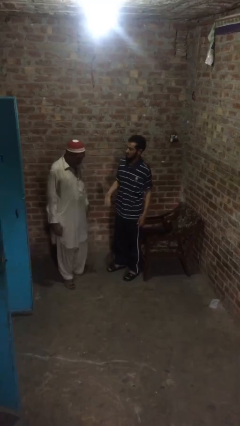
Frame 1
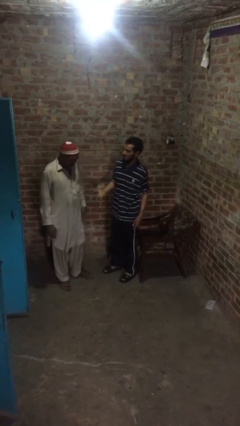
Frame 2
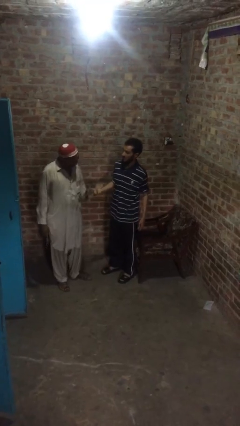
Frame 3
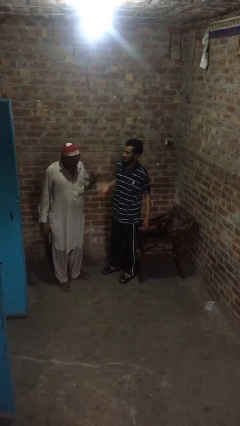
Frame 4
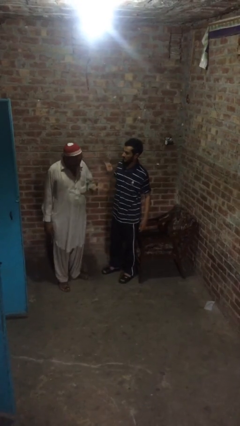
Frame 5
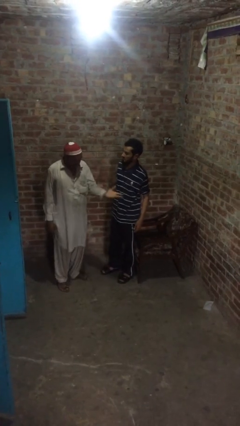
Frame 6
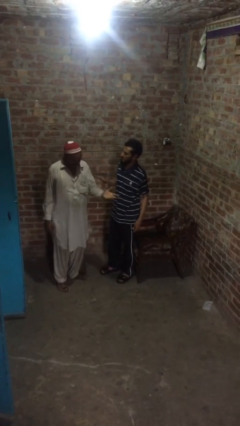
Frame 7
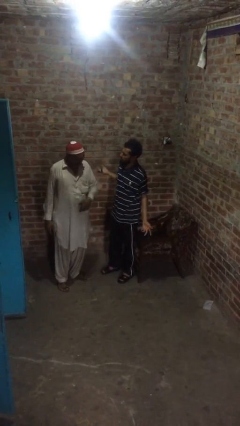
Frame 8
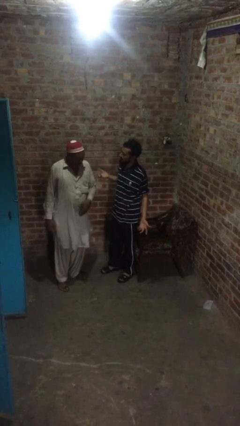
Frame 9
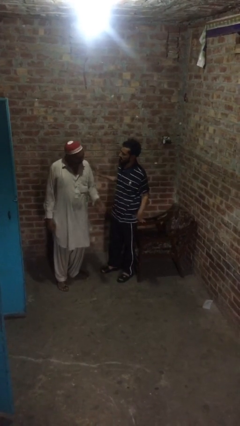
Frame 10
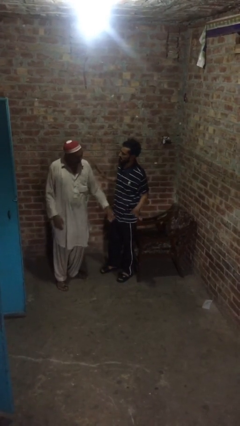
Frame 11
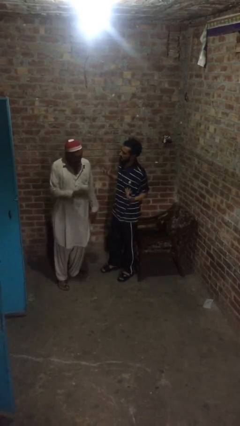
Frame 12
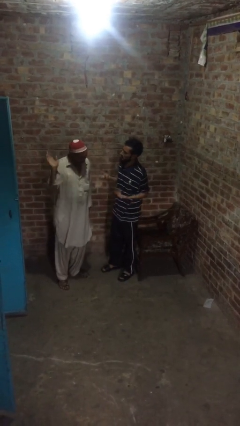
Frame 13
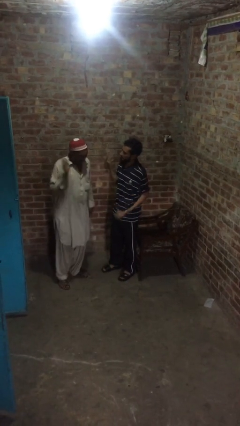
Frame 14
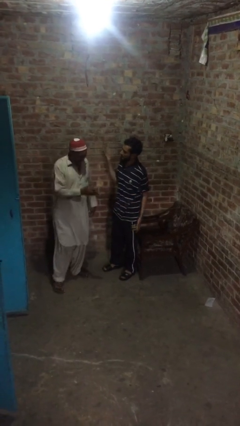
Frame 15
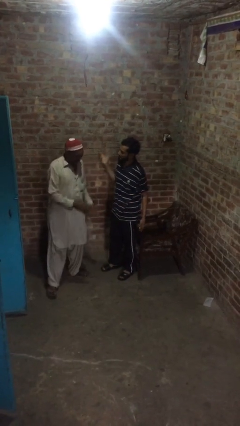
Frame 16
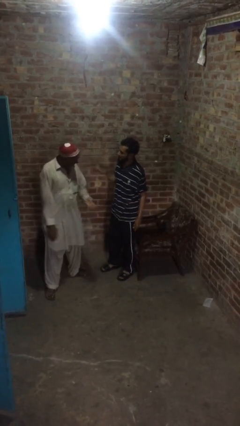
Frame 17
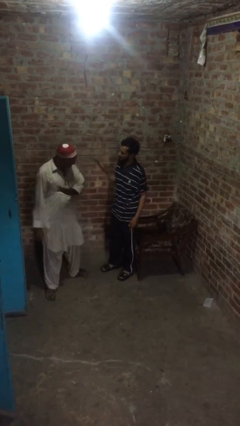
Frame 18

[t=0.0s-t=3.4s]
person talks to person

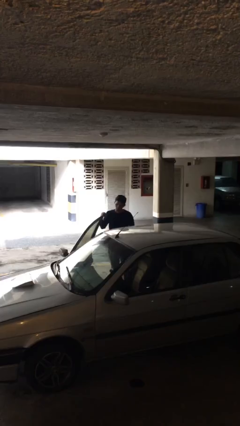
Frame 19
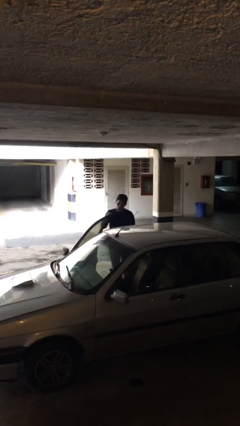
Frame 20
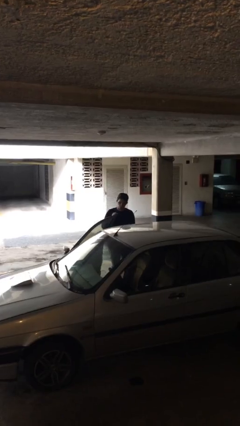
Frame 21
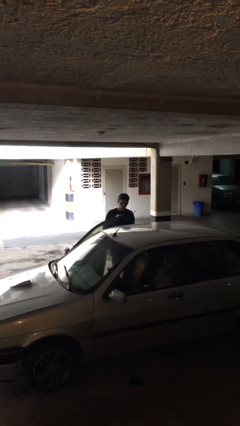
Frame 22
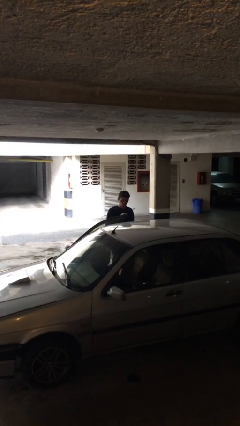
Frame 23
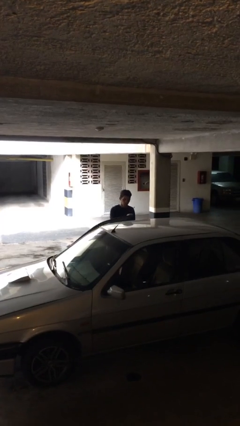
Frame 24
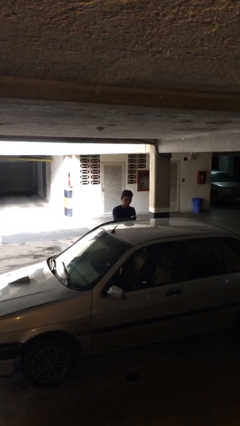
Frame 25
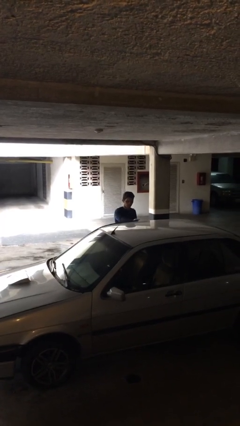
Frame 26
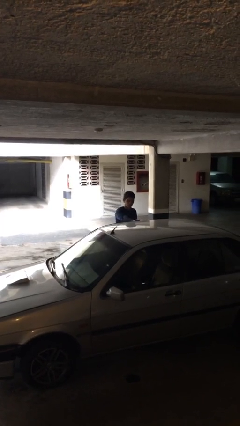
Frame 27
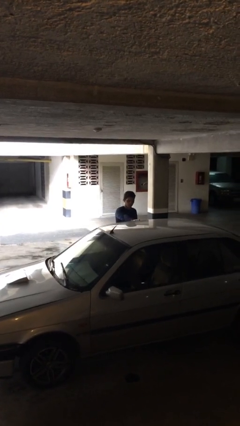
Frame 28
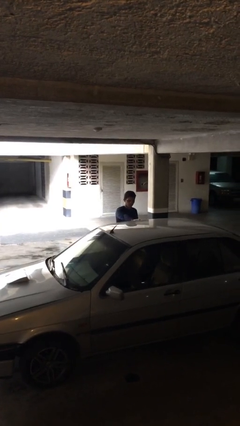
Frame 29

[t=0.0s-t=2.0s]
person closes car door

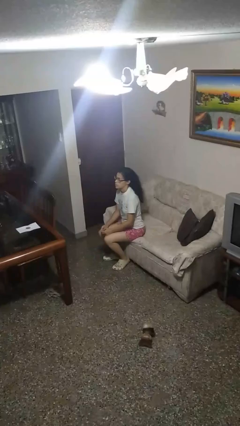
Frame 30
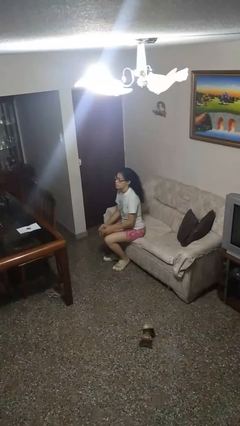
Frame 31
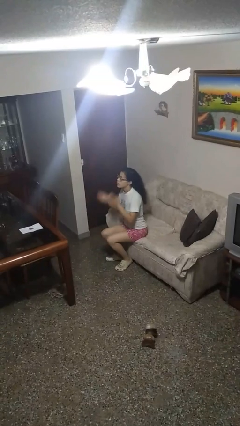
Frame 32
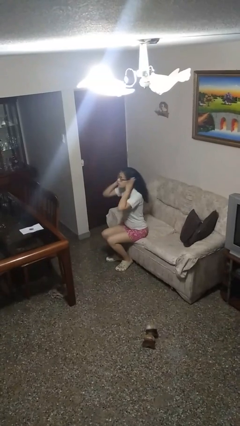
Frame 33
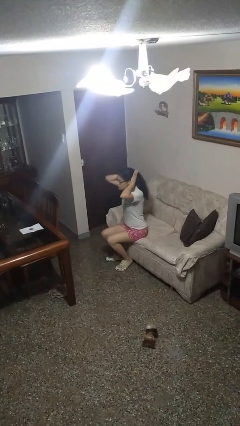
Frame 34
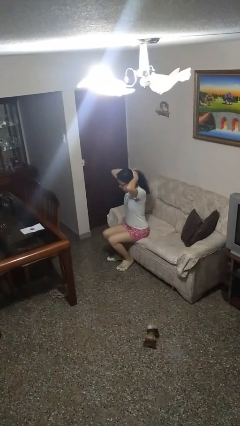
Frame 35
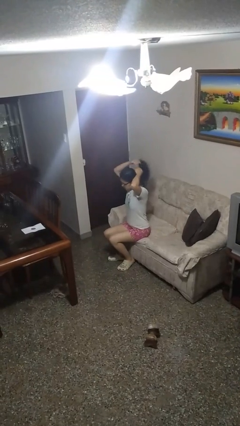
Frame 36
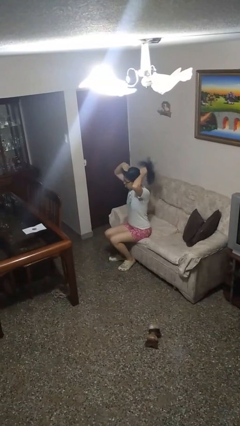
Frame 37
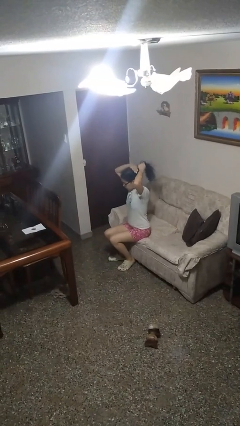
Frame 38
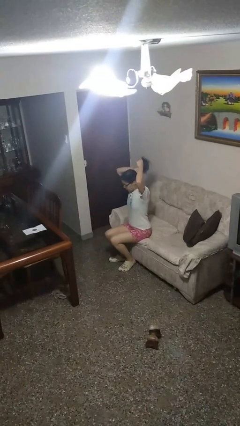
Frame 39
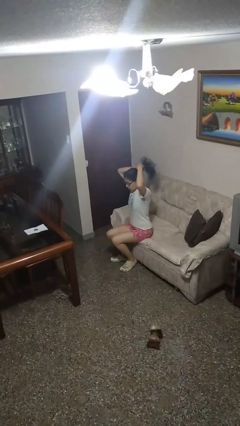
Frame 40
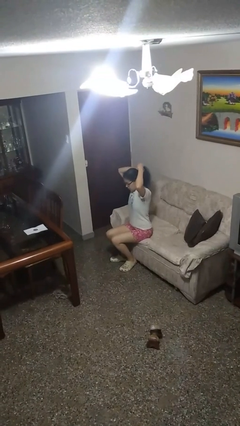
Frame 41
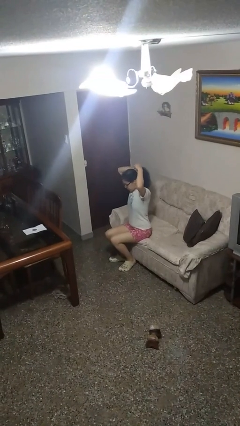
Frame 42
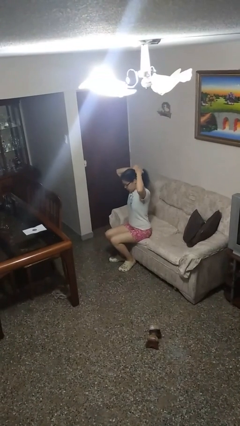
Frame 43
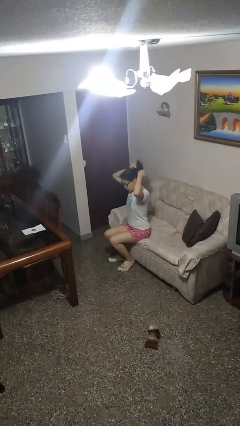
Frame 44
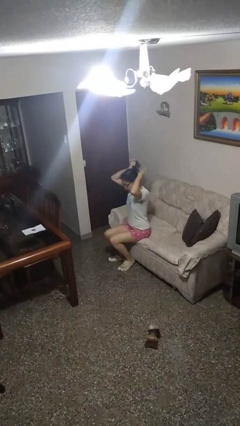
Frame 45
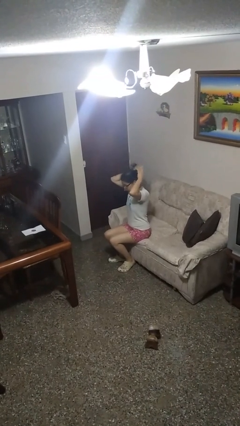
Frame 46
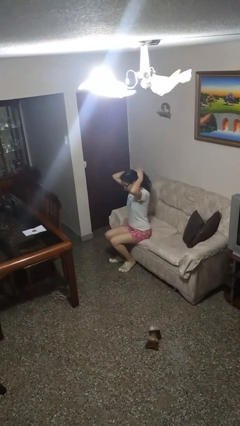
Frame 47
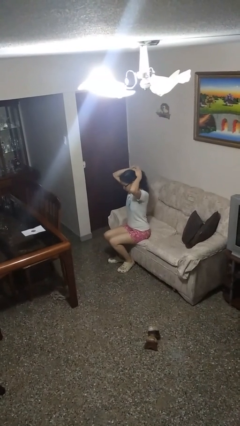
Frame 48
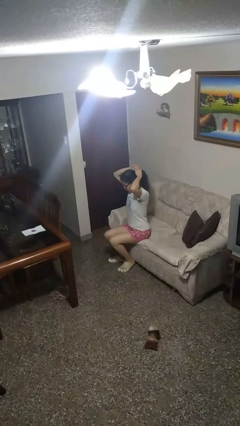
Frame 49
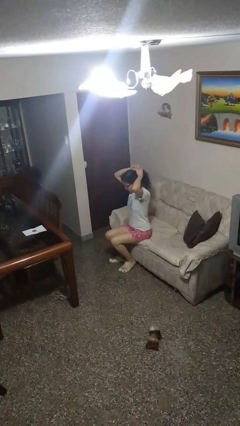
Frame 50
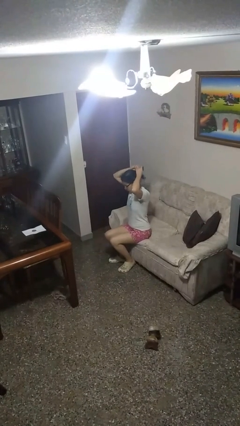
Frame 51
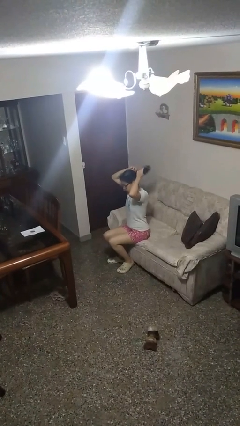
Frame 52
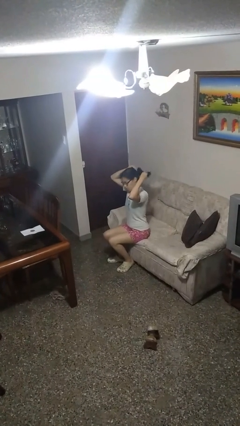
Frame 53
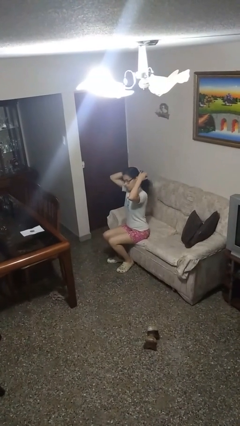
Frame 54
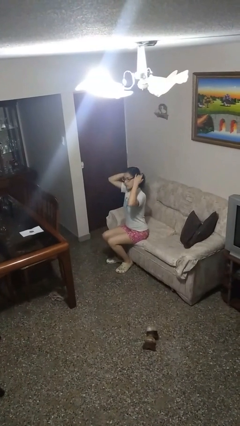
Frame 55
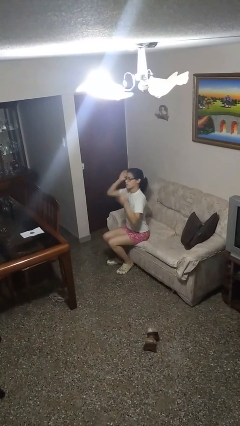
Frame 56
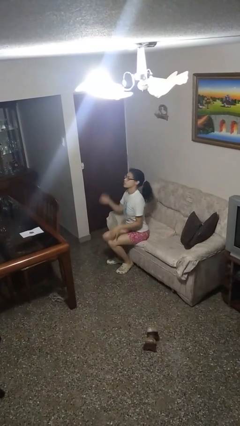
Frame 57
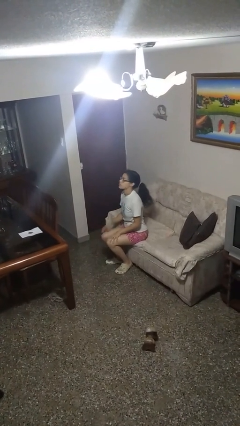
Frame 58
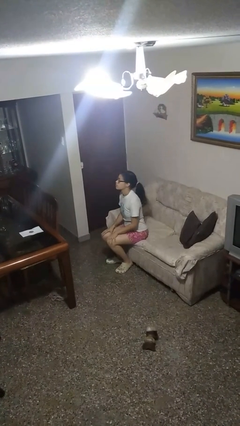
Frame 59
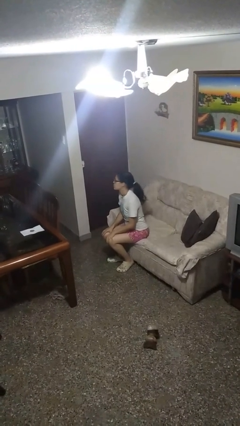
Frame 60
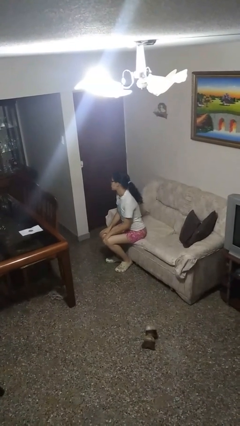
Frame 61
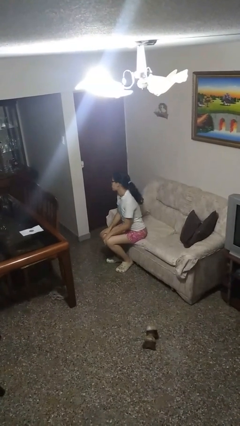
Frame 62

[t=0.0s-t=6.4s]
person puts hair in ponytail

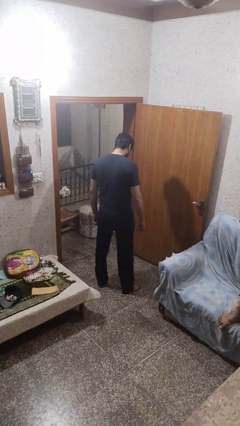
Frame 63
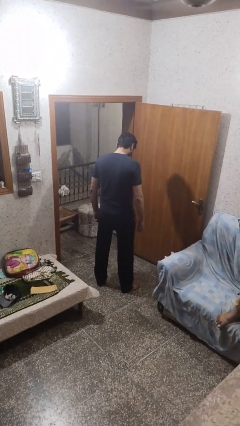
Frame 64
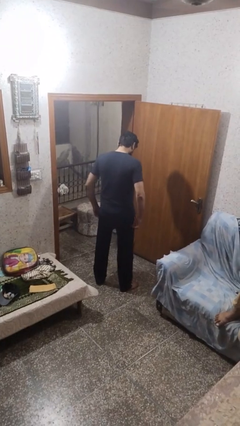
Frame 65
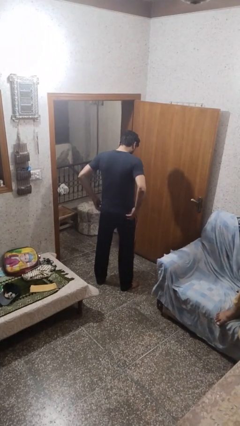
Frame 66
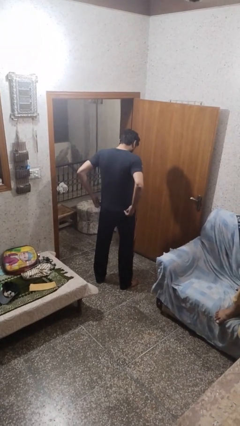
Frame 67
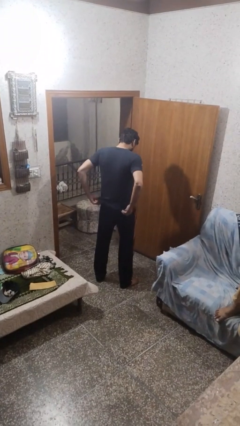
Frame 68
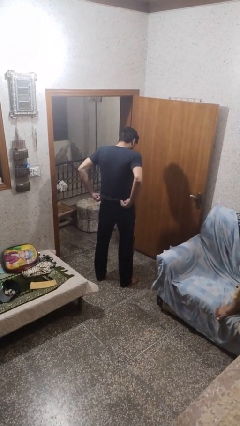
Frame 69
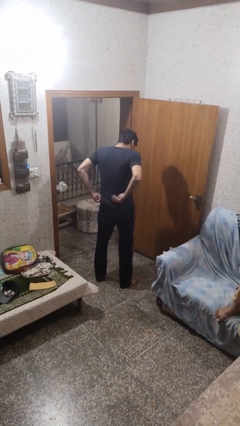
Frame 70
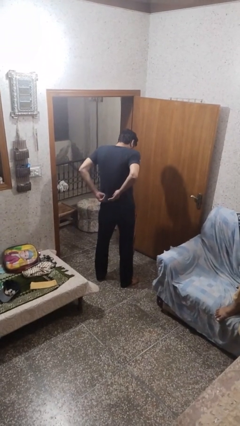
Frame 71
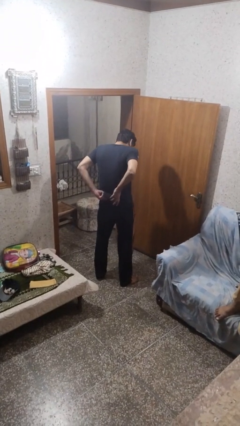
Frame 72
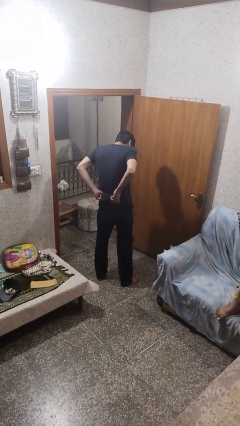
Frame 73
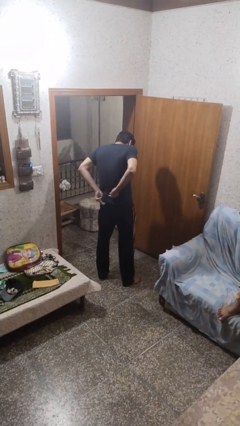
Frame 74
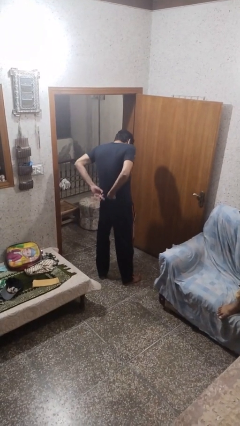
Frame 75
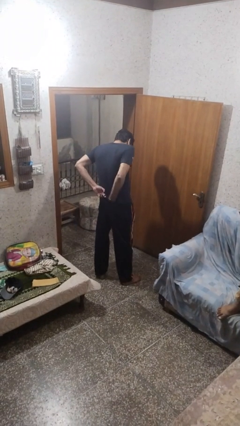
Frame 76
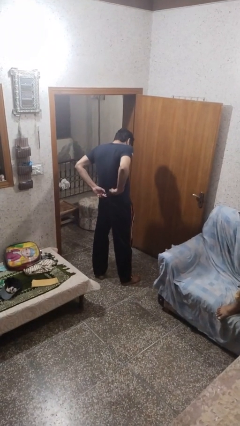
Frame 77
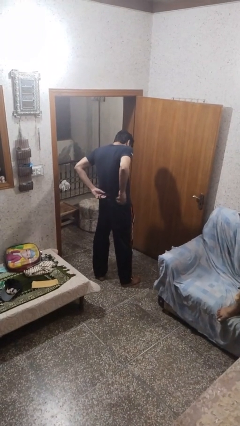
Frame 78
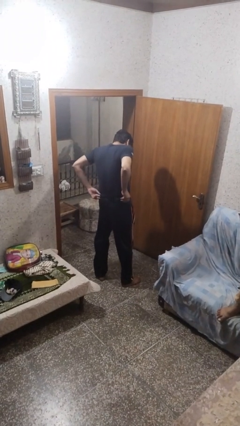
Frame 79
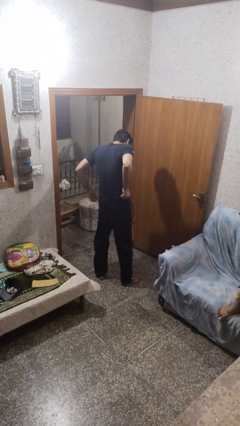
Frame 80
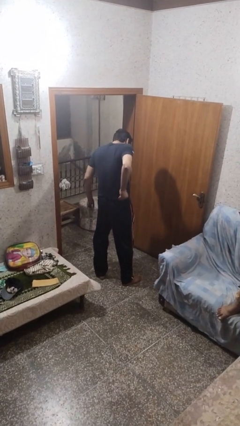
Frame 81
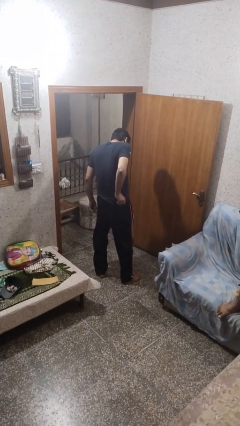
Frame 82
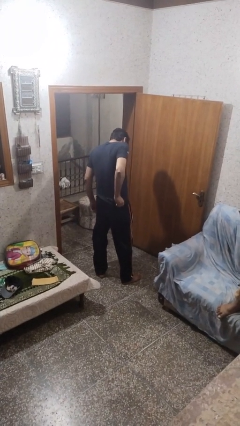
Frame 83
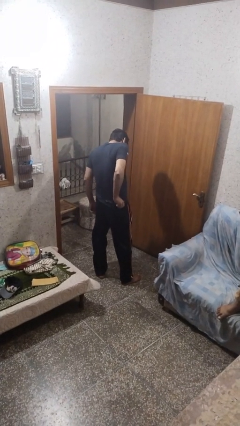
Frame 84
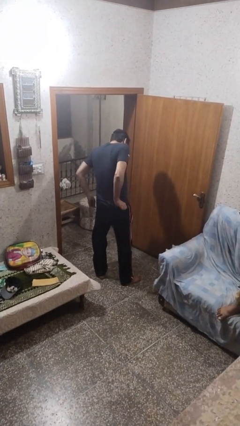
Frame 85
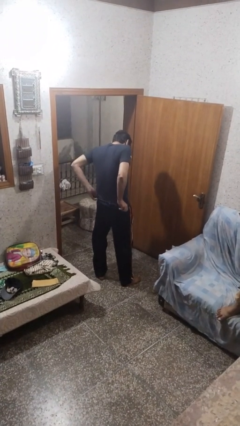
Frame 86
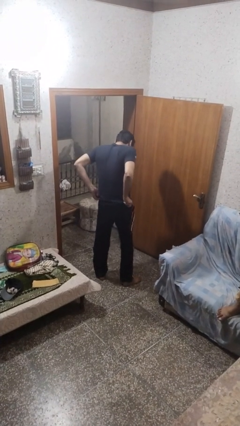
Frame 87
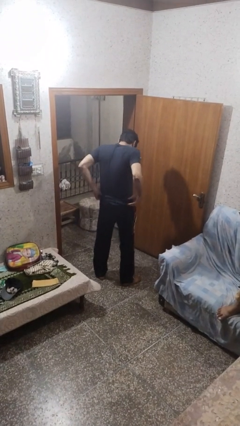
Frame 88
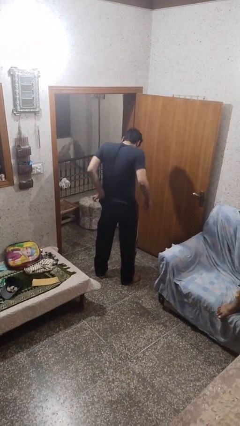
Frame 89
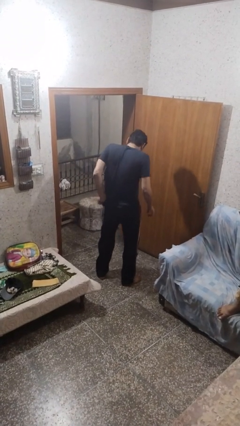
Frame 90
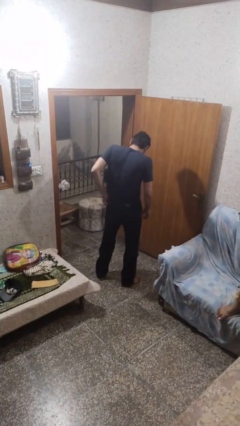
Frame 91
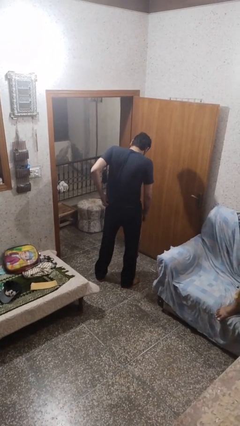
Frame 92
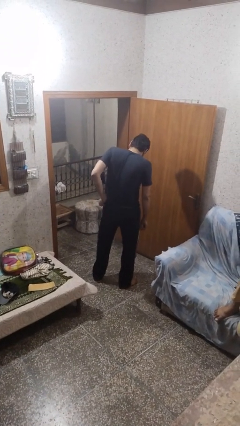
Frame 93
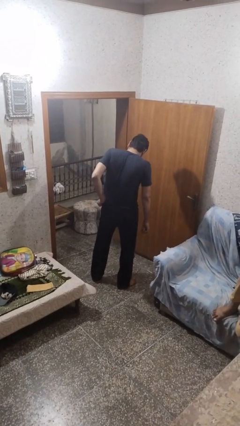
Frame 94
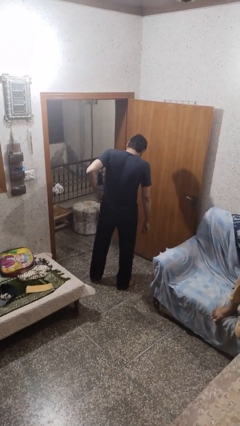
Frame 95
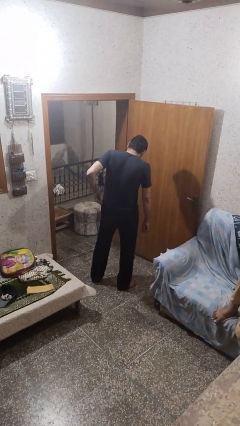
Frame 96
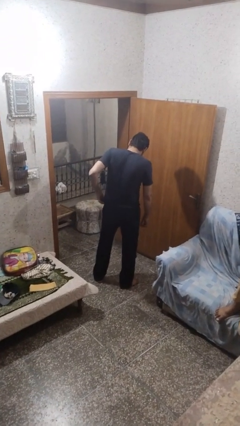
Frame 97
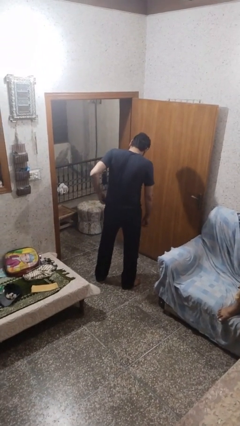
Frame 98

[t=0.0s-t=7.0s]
person tucks in shirt
